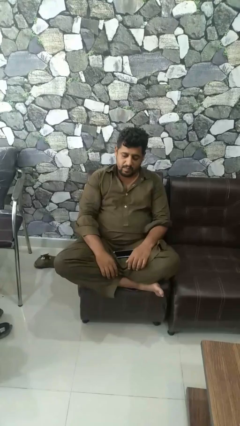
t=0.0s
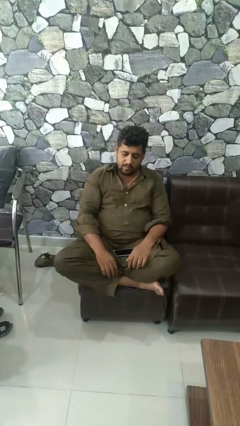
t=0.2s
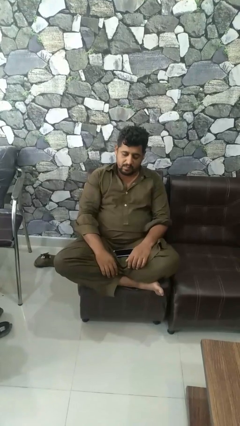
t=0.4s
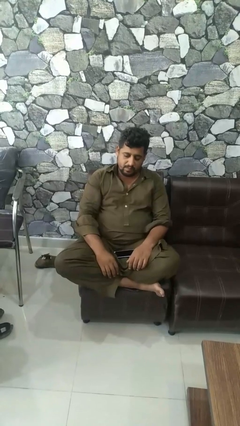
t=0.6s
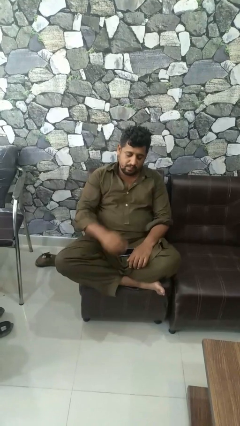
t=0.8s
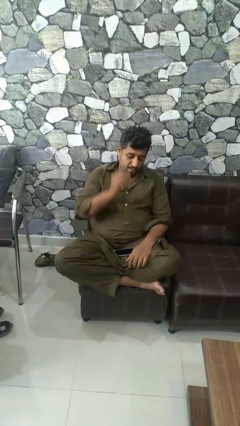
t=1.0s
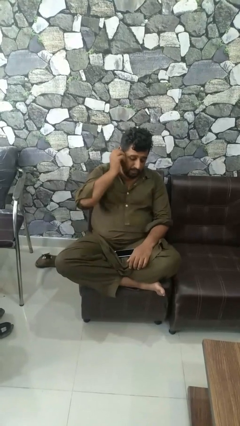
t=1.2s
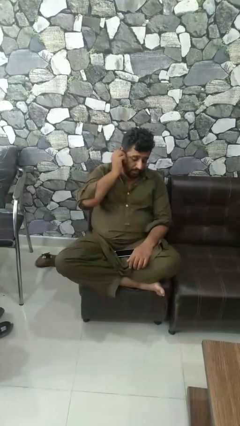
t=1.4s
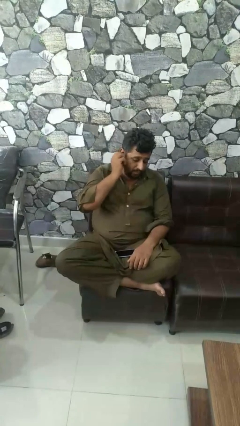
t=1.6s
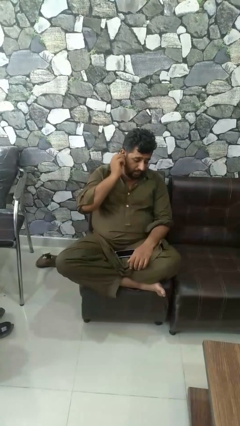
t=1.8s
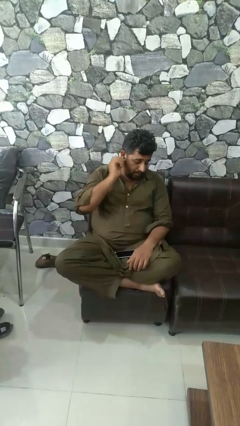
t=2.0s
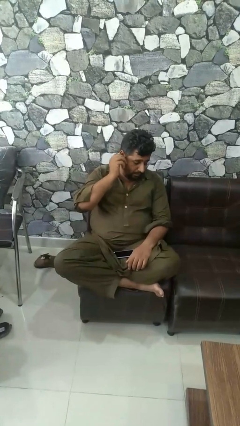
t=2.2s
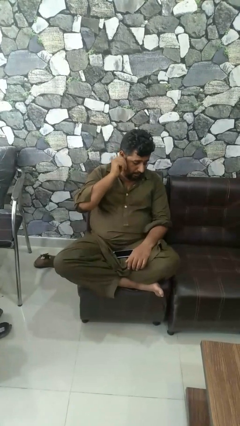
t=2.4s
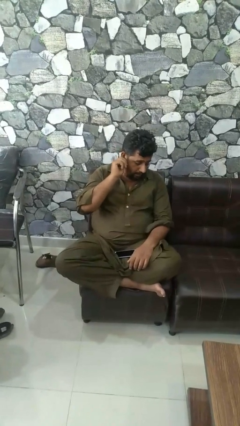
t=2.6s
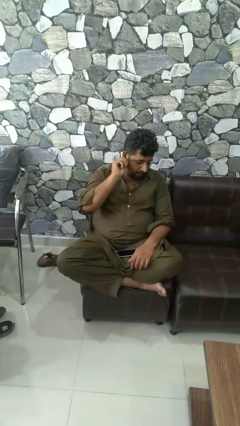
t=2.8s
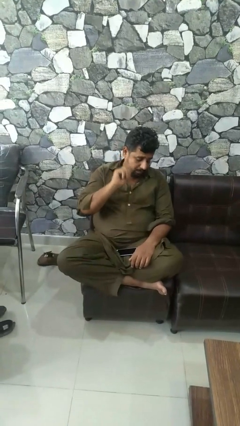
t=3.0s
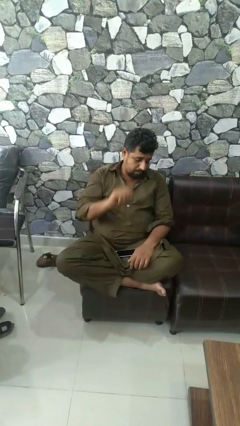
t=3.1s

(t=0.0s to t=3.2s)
person touches earlobe

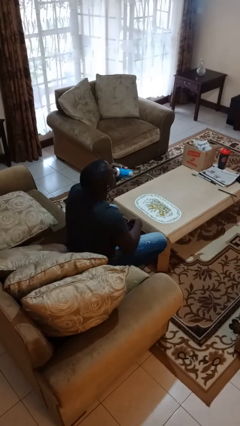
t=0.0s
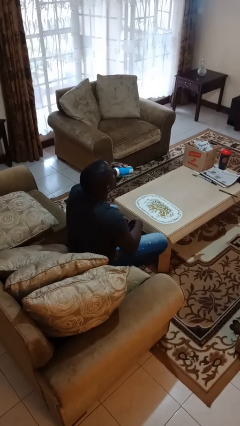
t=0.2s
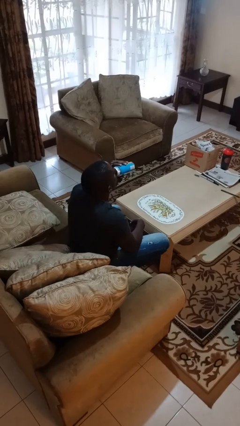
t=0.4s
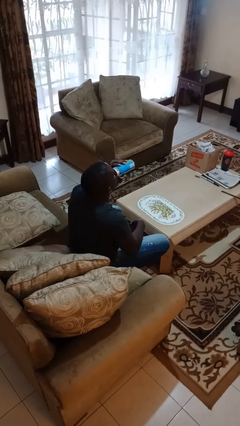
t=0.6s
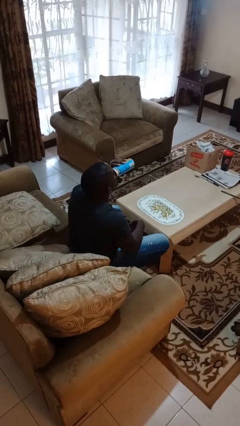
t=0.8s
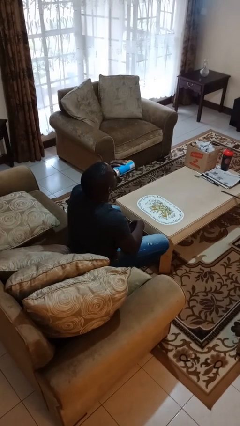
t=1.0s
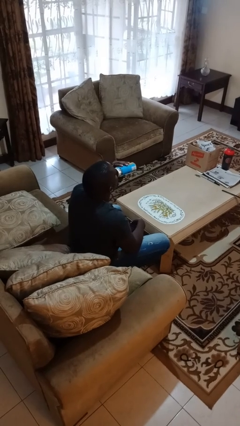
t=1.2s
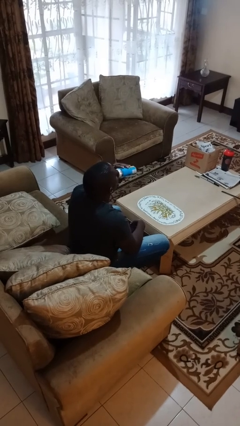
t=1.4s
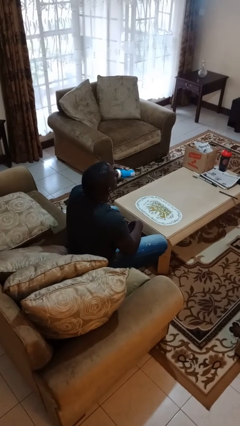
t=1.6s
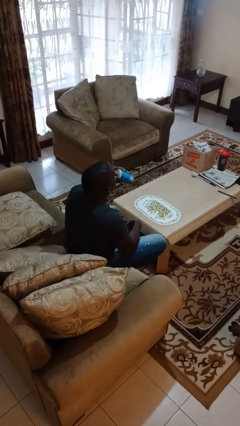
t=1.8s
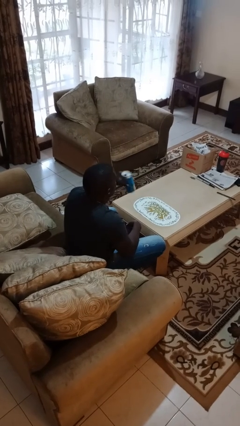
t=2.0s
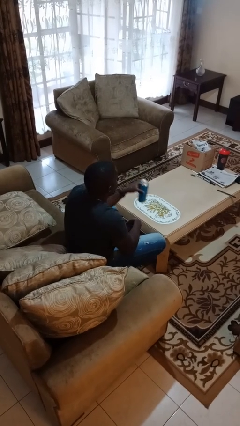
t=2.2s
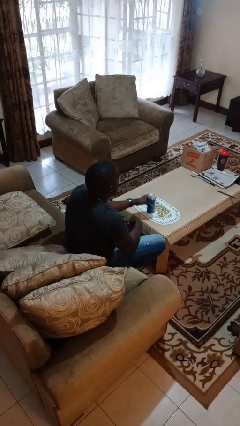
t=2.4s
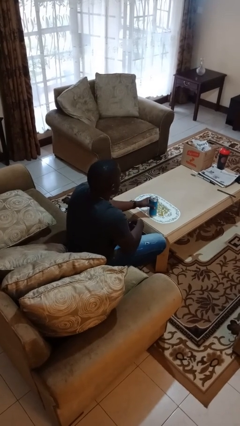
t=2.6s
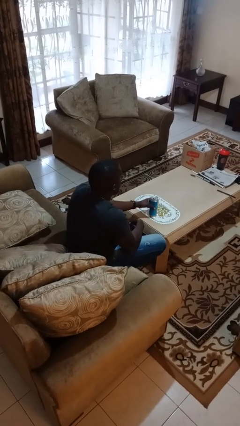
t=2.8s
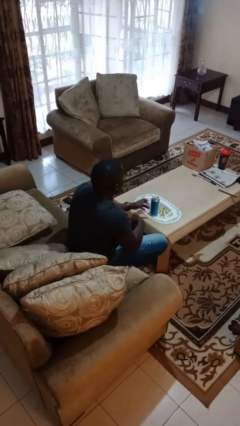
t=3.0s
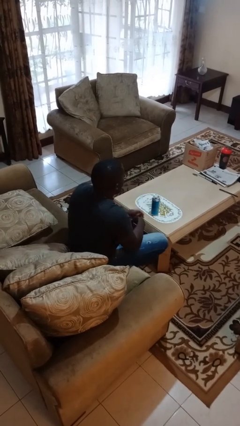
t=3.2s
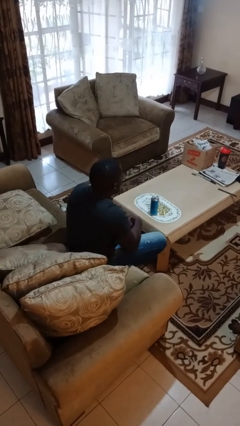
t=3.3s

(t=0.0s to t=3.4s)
person drinks from beverage can

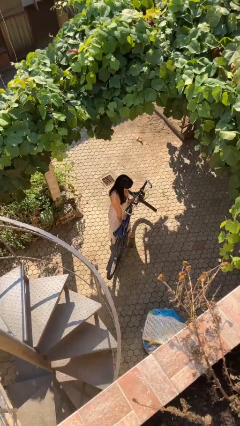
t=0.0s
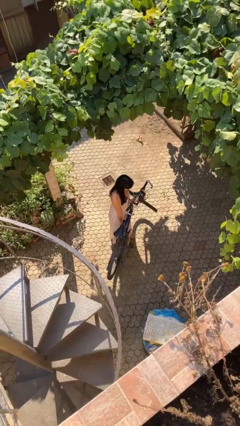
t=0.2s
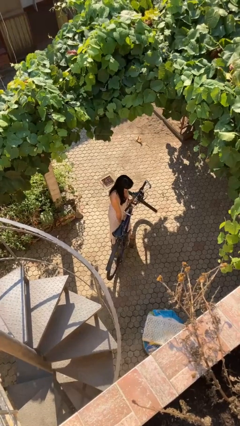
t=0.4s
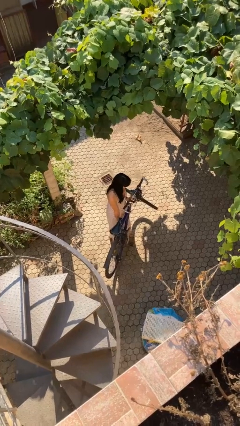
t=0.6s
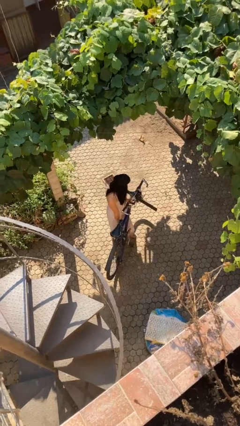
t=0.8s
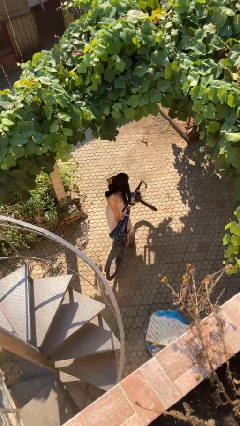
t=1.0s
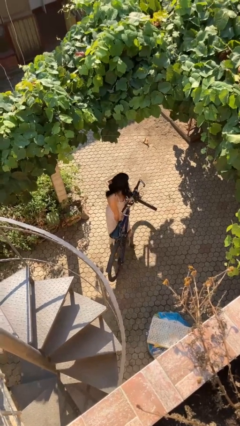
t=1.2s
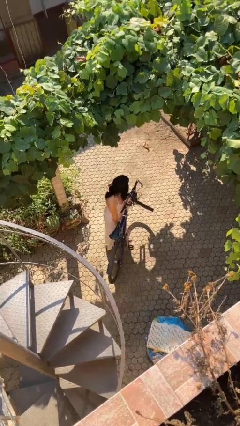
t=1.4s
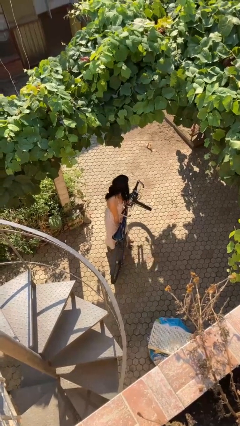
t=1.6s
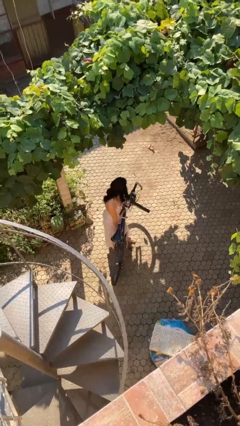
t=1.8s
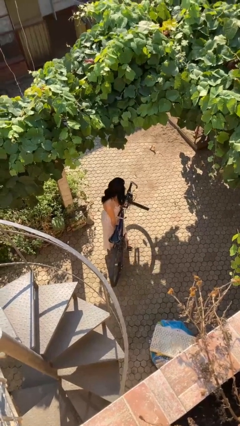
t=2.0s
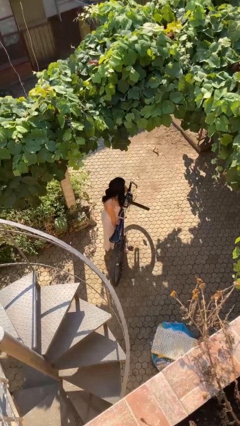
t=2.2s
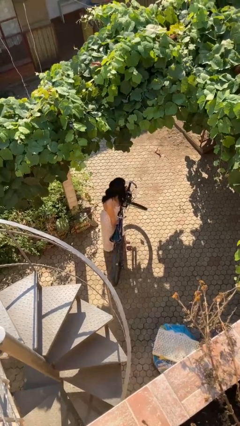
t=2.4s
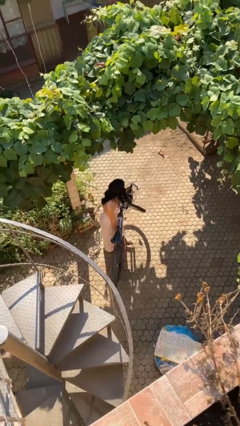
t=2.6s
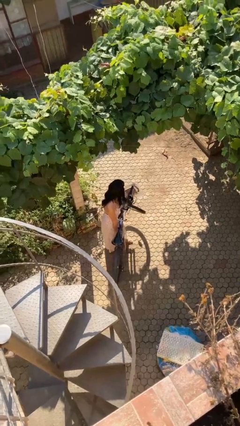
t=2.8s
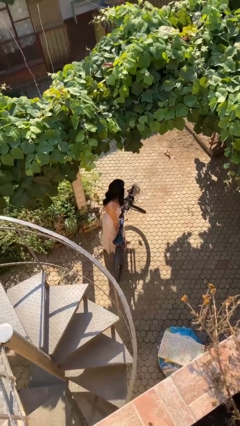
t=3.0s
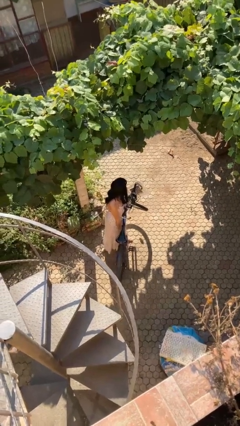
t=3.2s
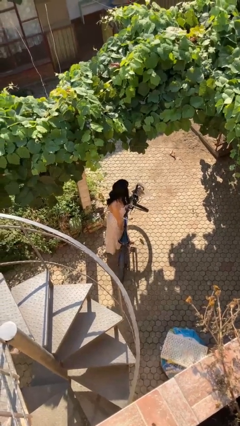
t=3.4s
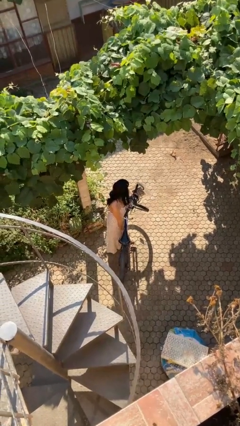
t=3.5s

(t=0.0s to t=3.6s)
person carries bicycle

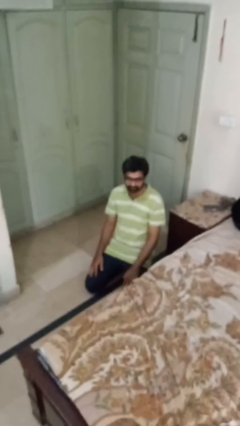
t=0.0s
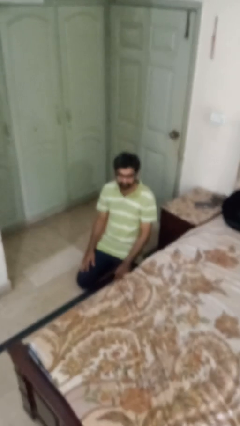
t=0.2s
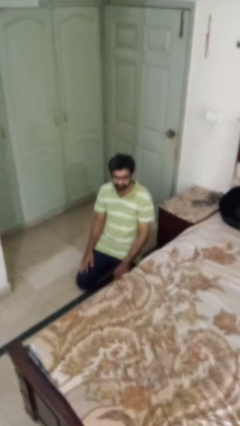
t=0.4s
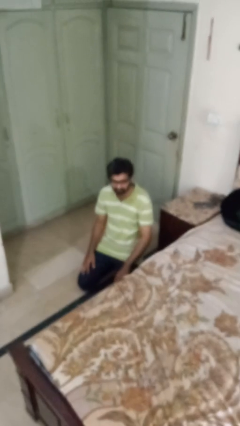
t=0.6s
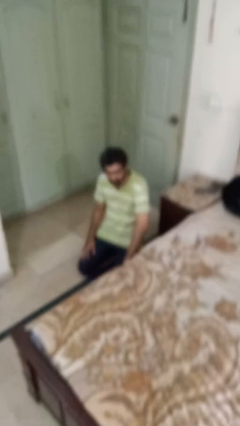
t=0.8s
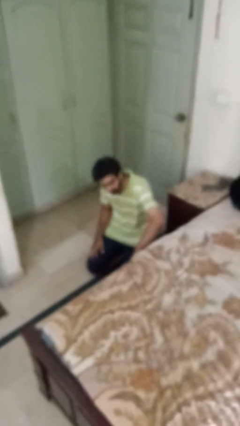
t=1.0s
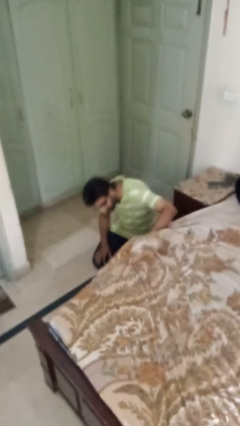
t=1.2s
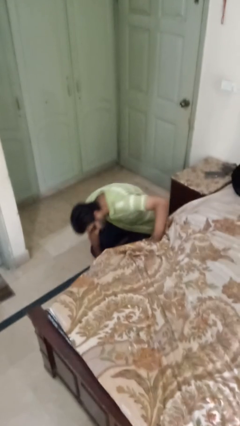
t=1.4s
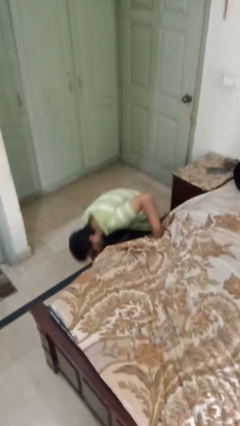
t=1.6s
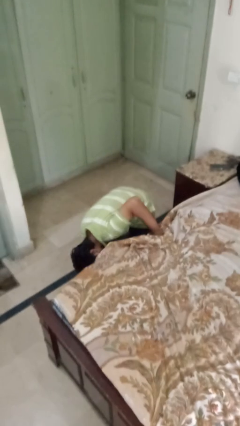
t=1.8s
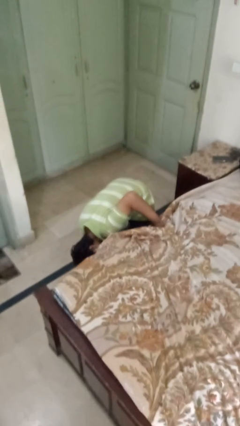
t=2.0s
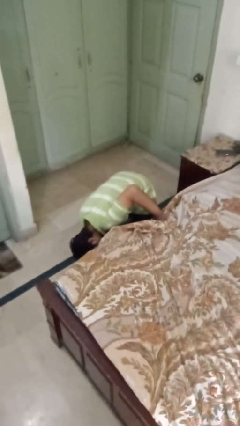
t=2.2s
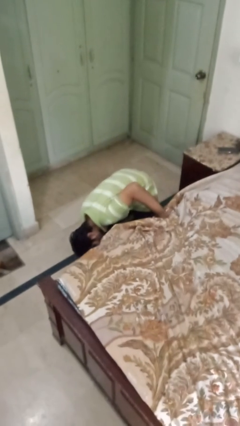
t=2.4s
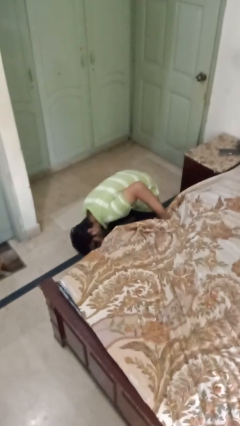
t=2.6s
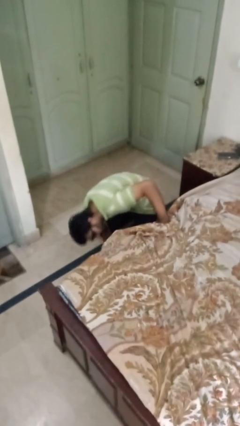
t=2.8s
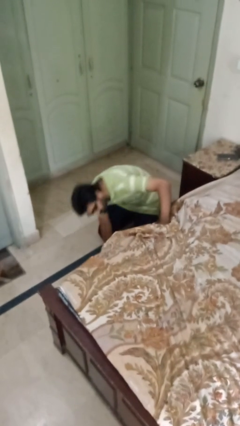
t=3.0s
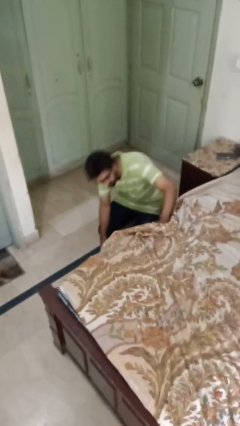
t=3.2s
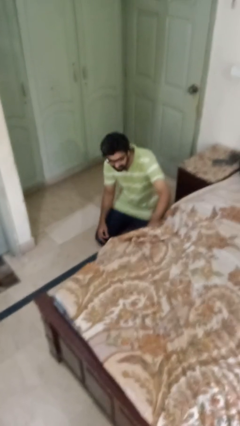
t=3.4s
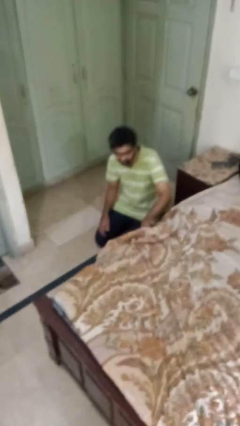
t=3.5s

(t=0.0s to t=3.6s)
person searches under bed

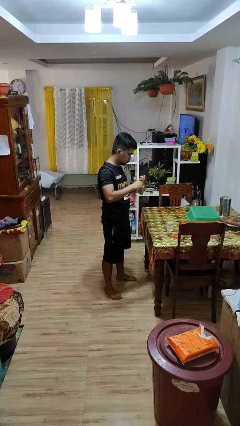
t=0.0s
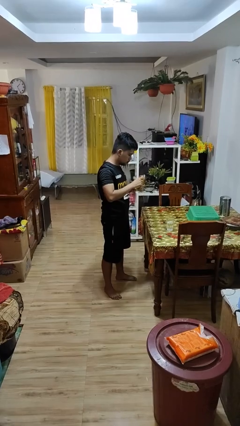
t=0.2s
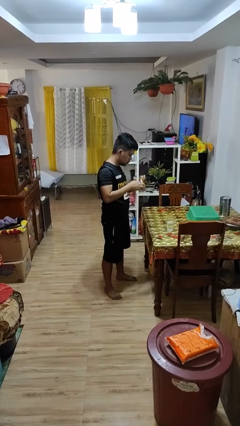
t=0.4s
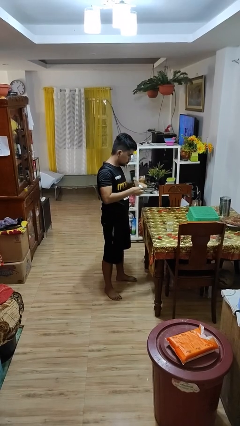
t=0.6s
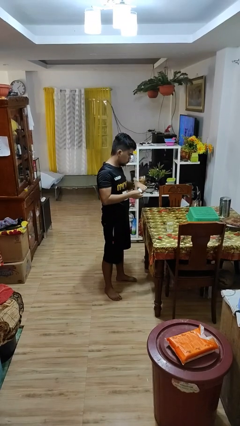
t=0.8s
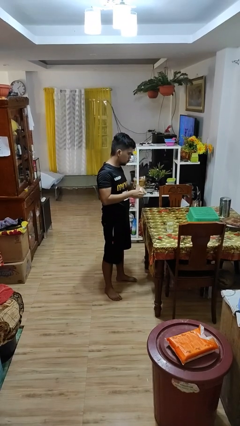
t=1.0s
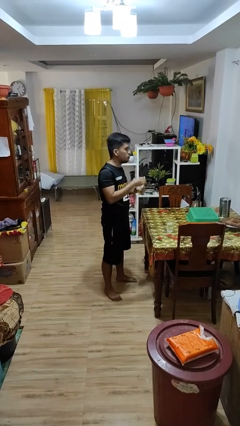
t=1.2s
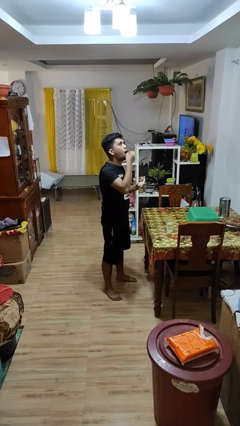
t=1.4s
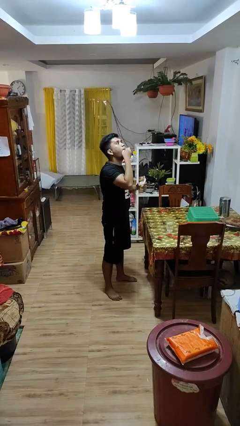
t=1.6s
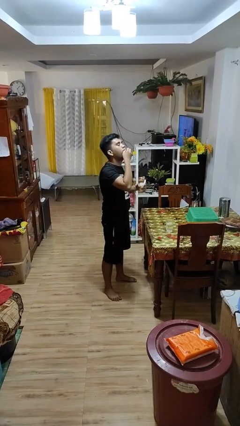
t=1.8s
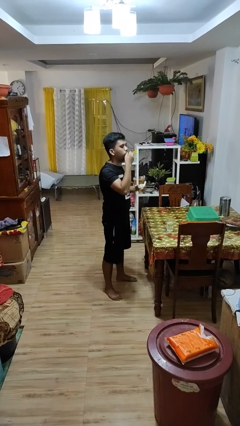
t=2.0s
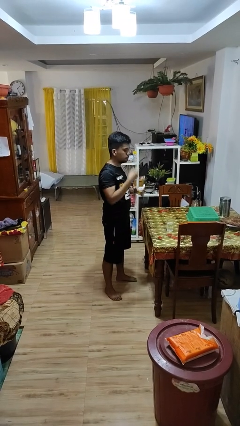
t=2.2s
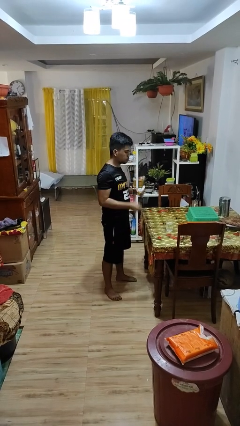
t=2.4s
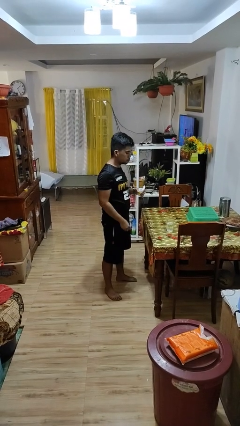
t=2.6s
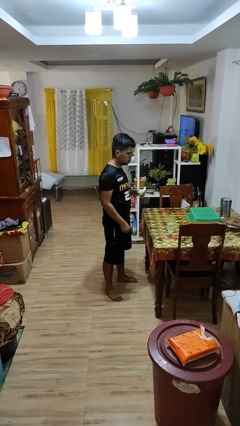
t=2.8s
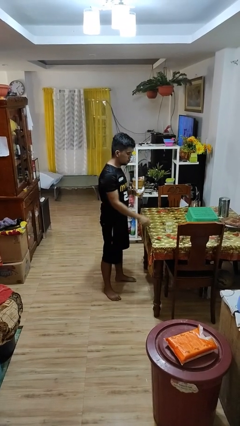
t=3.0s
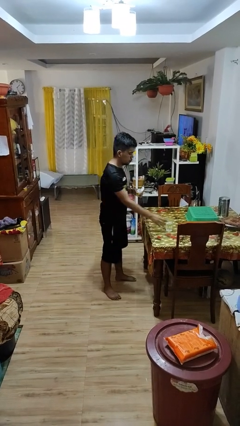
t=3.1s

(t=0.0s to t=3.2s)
person takes medicine pills

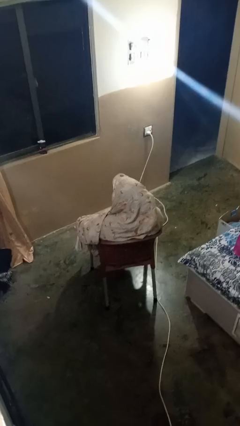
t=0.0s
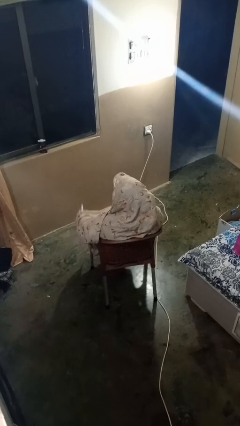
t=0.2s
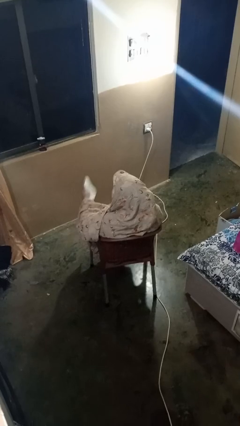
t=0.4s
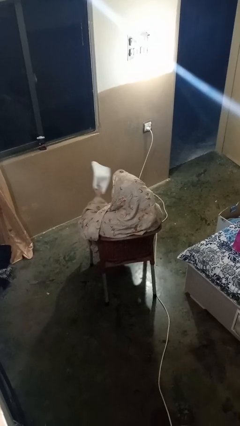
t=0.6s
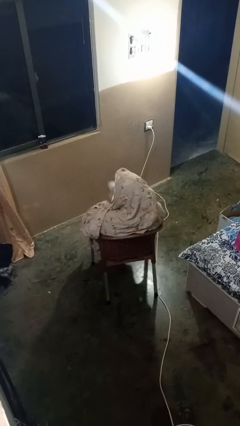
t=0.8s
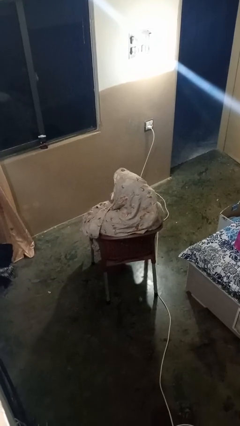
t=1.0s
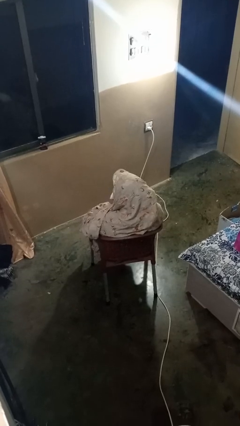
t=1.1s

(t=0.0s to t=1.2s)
person wipes mouth with napkin
